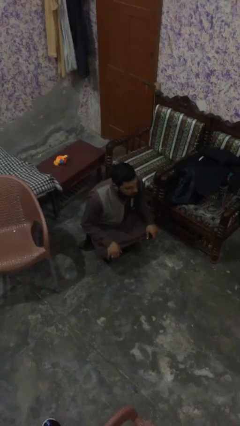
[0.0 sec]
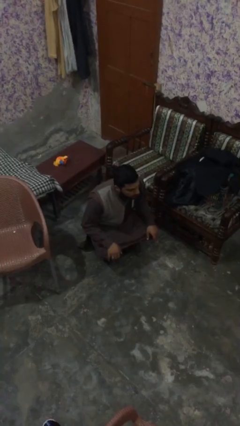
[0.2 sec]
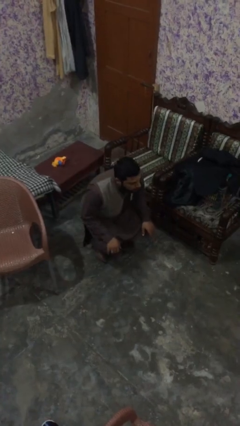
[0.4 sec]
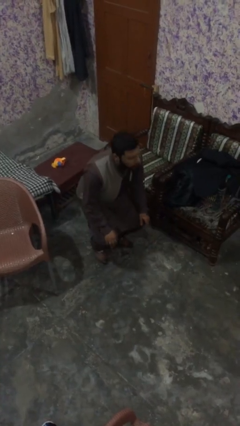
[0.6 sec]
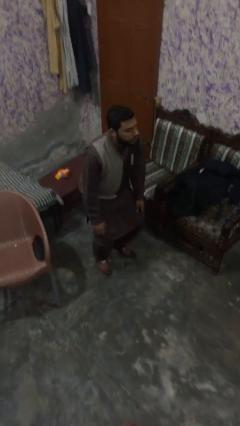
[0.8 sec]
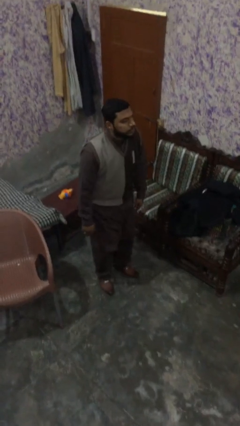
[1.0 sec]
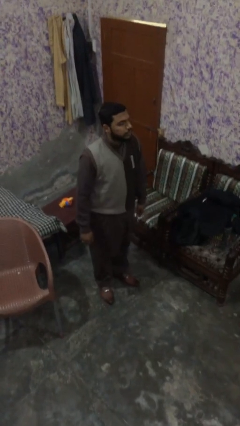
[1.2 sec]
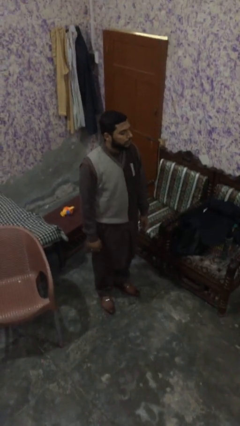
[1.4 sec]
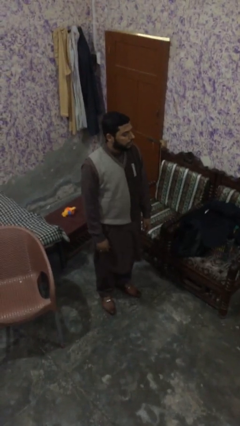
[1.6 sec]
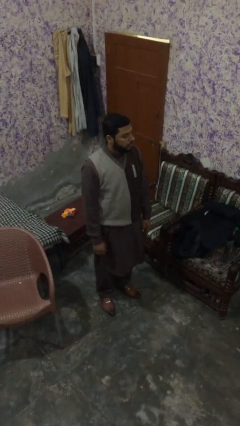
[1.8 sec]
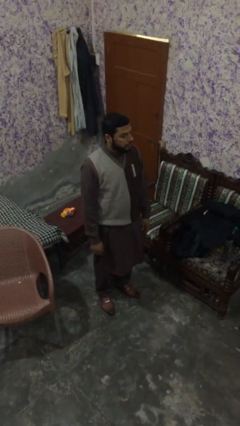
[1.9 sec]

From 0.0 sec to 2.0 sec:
person stands up

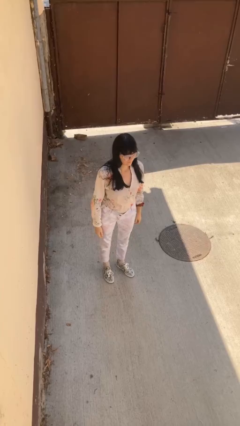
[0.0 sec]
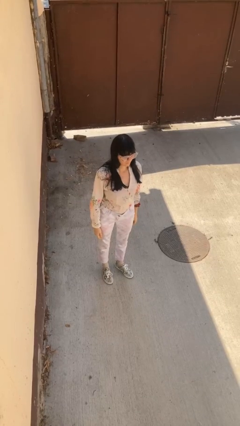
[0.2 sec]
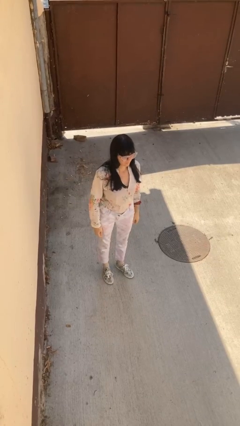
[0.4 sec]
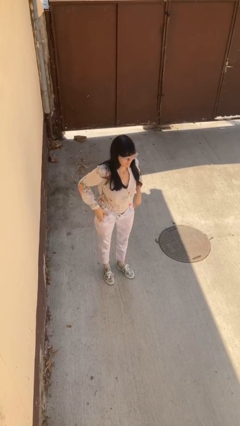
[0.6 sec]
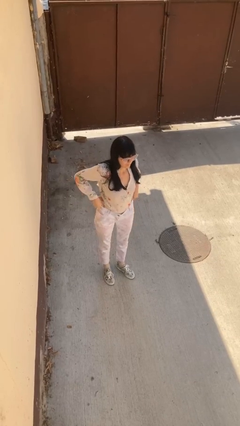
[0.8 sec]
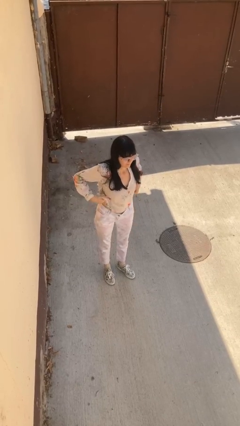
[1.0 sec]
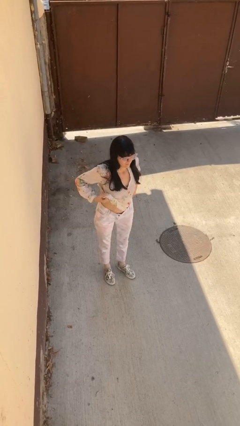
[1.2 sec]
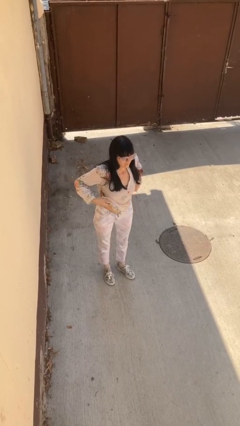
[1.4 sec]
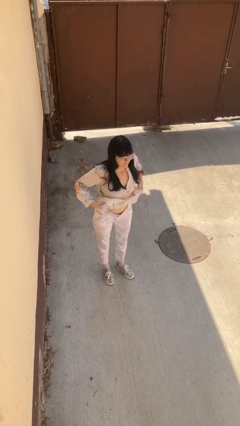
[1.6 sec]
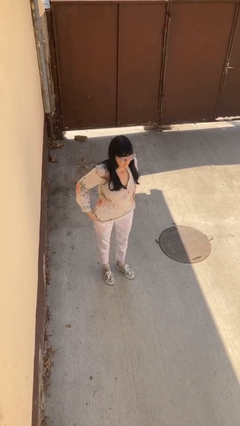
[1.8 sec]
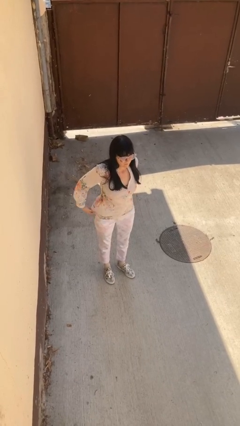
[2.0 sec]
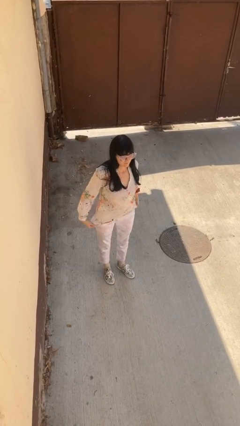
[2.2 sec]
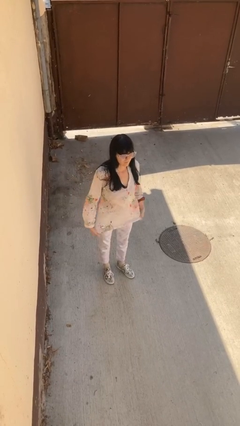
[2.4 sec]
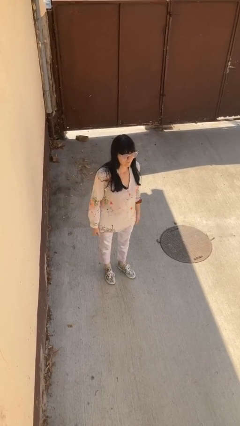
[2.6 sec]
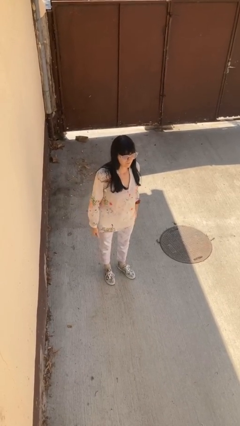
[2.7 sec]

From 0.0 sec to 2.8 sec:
person untucks shirt

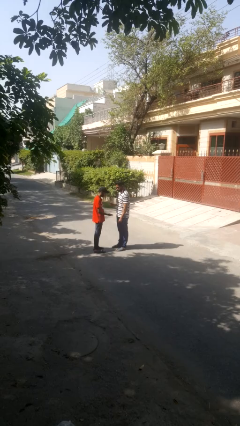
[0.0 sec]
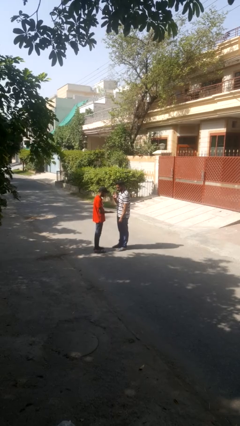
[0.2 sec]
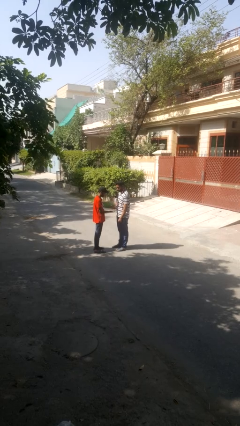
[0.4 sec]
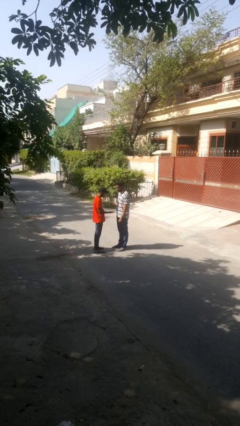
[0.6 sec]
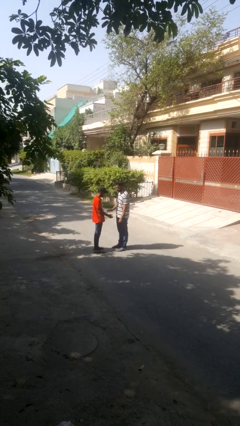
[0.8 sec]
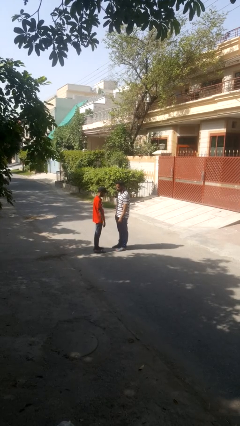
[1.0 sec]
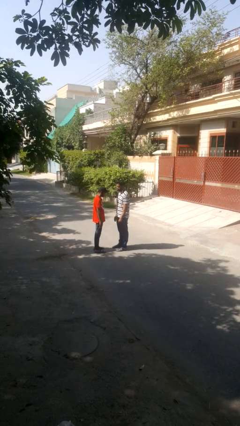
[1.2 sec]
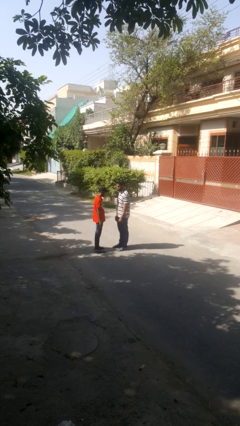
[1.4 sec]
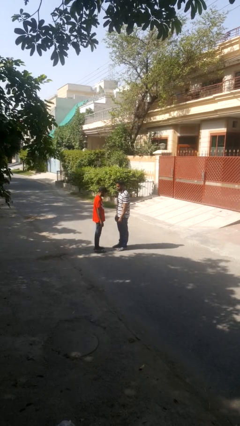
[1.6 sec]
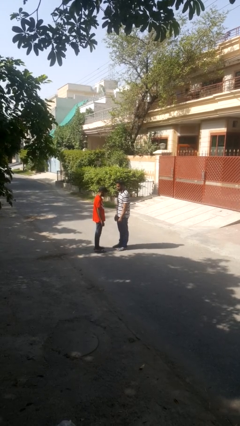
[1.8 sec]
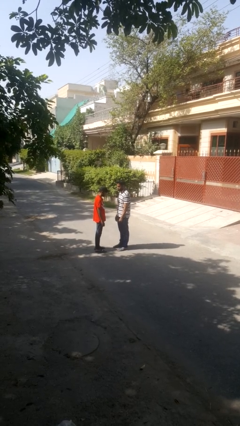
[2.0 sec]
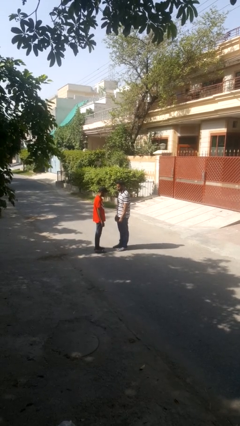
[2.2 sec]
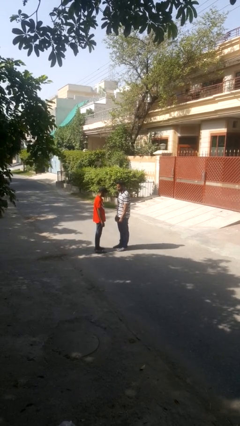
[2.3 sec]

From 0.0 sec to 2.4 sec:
person highfives hand

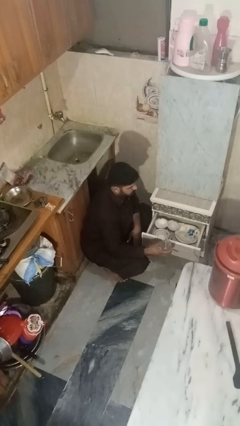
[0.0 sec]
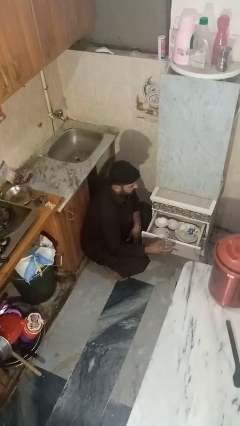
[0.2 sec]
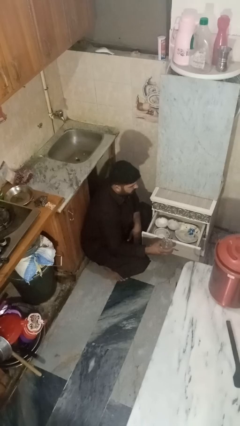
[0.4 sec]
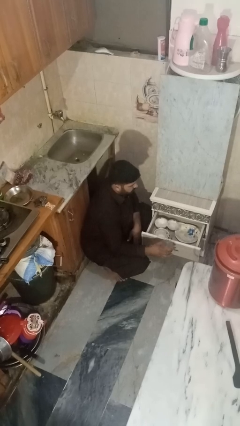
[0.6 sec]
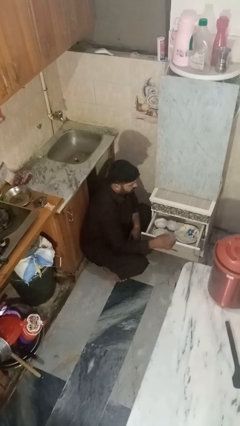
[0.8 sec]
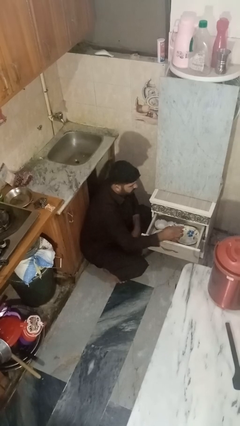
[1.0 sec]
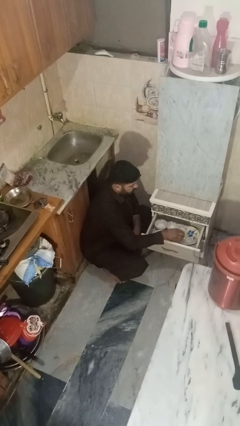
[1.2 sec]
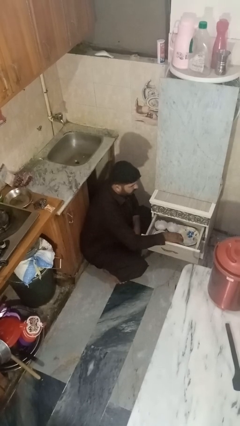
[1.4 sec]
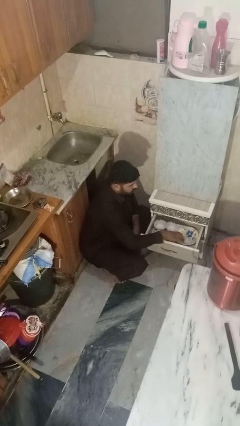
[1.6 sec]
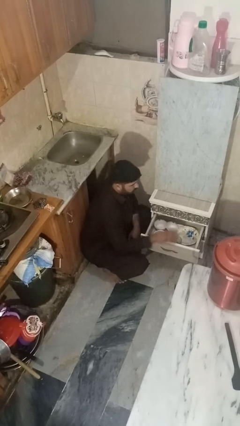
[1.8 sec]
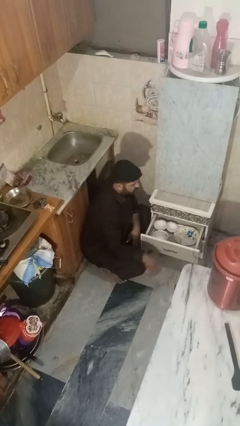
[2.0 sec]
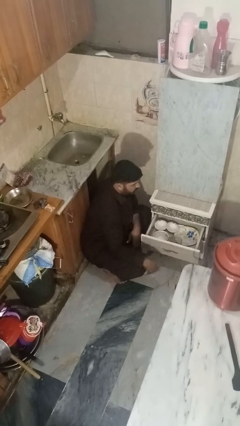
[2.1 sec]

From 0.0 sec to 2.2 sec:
person puts object into kitchen drawer

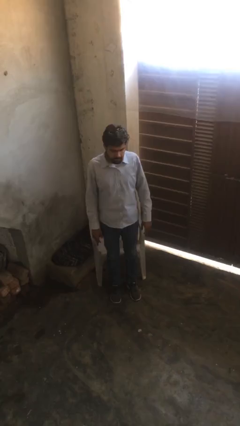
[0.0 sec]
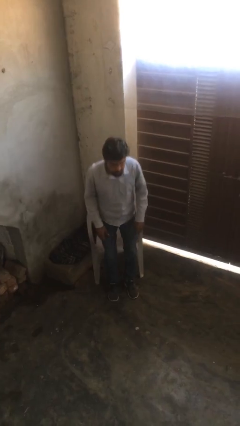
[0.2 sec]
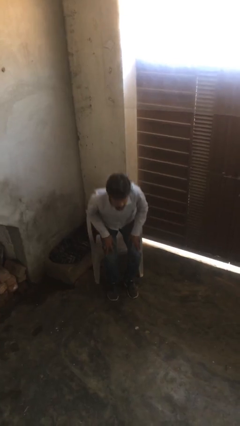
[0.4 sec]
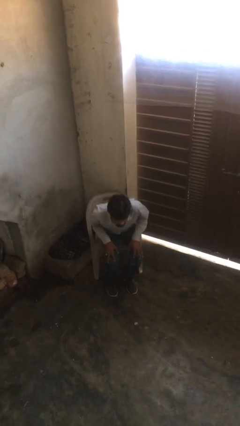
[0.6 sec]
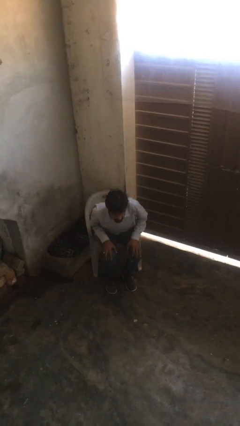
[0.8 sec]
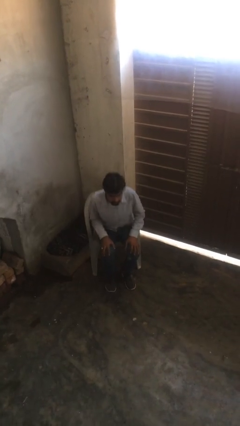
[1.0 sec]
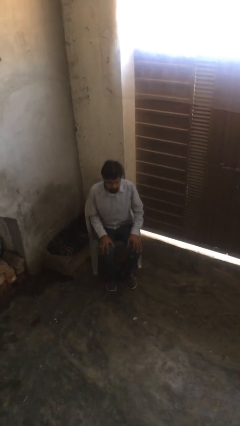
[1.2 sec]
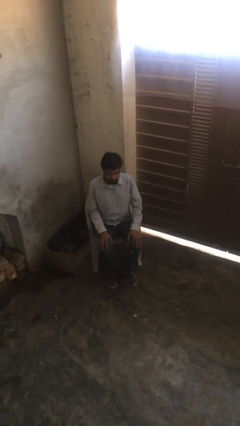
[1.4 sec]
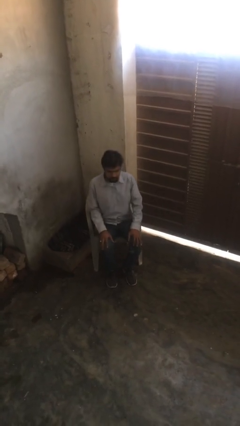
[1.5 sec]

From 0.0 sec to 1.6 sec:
person sits down

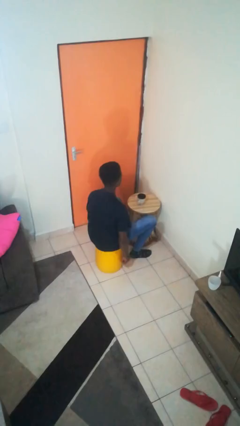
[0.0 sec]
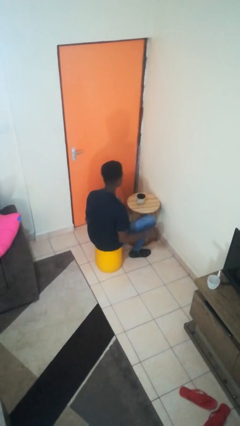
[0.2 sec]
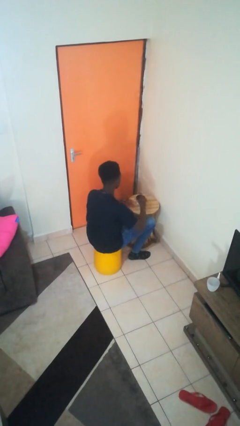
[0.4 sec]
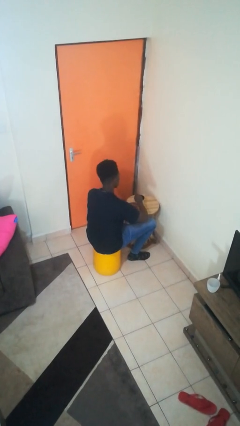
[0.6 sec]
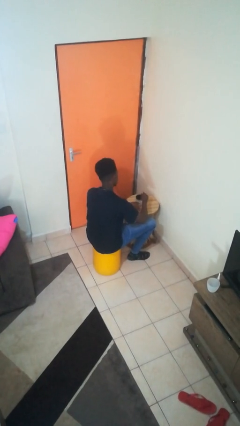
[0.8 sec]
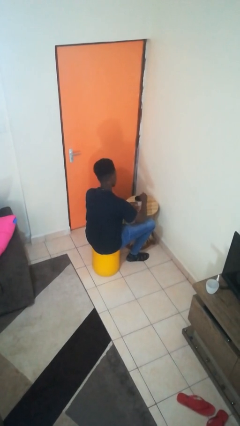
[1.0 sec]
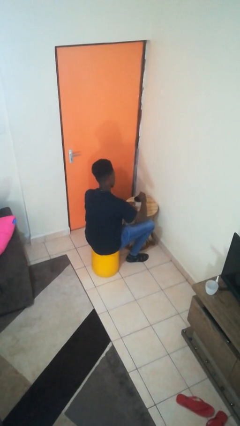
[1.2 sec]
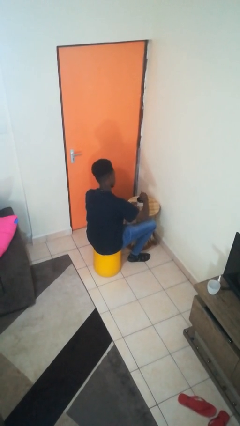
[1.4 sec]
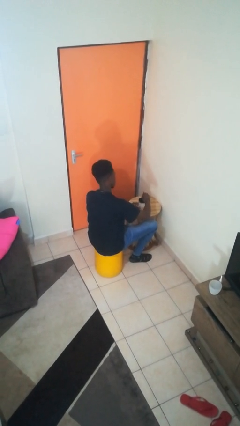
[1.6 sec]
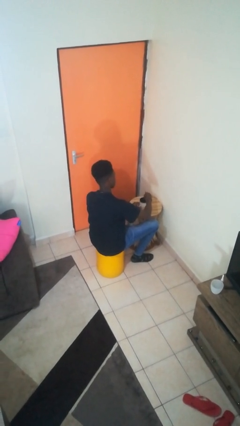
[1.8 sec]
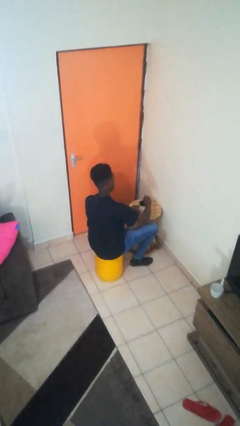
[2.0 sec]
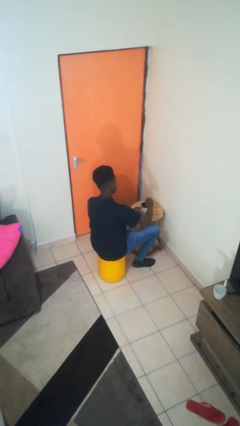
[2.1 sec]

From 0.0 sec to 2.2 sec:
person stirs mug

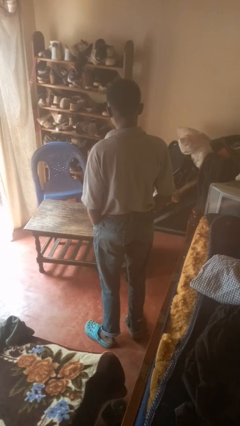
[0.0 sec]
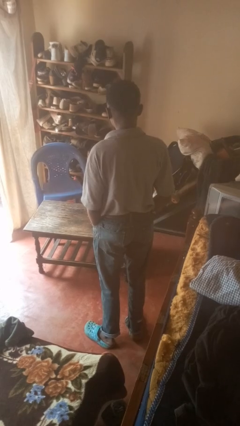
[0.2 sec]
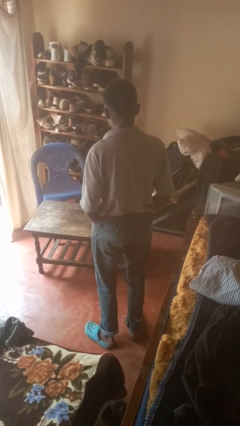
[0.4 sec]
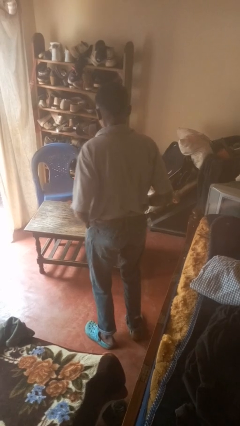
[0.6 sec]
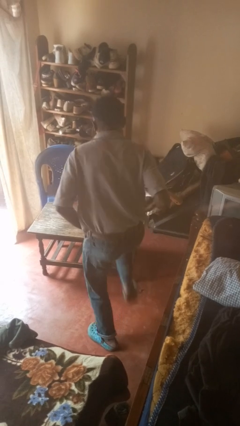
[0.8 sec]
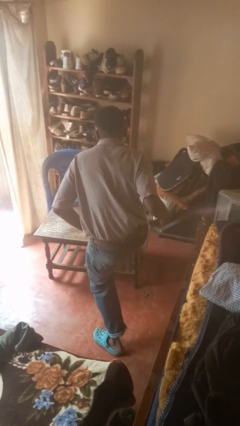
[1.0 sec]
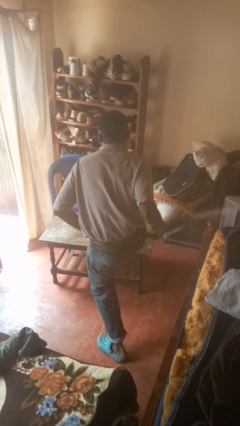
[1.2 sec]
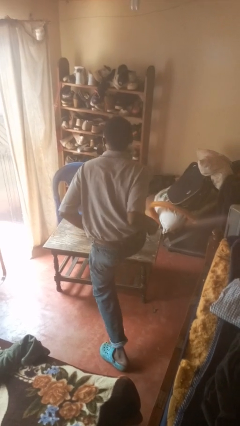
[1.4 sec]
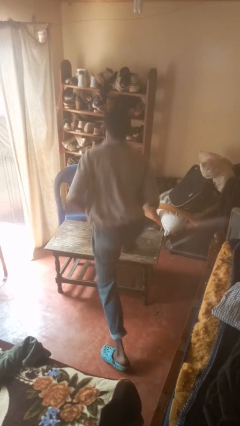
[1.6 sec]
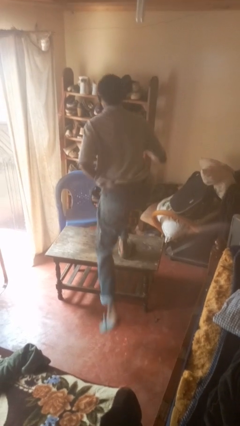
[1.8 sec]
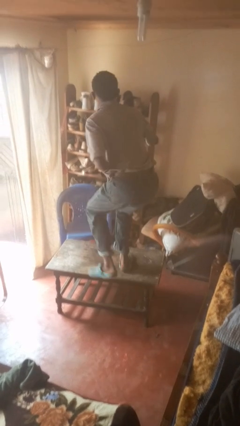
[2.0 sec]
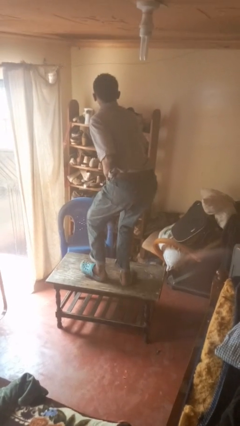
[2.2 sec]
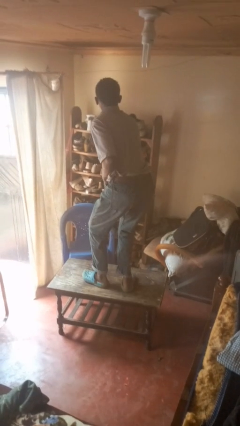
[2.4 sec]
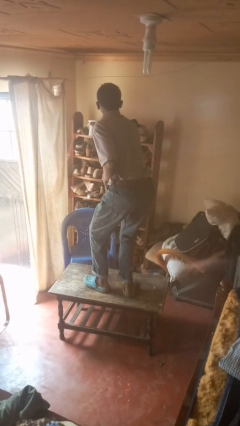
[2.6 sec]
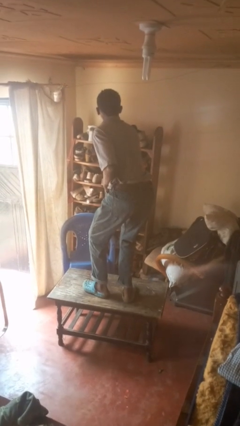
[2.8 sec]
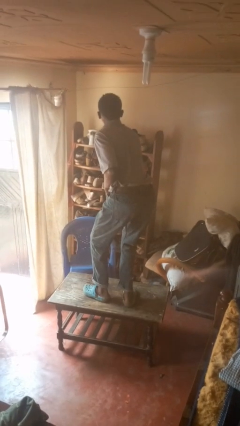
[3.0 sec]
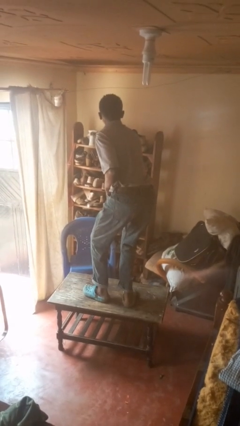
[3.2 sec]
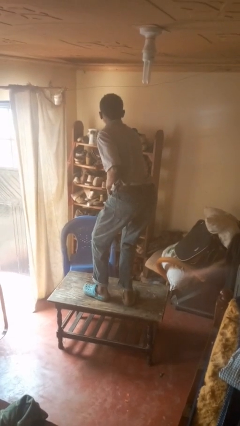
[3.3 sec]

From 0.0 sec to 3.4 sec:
person climbs on table

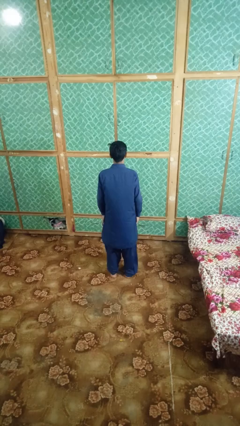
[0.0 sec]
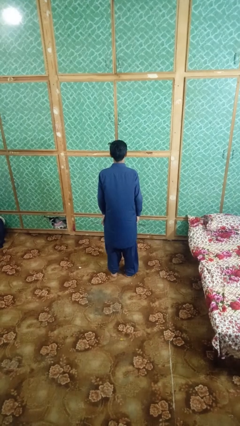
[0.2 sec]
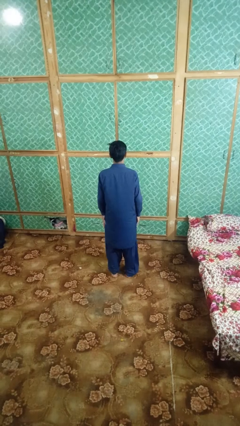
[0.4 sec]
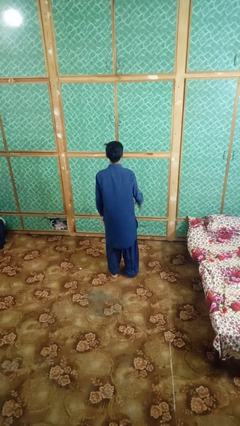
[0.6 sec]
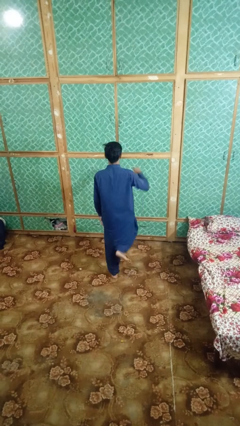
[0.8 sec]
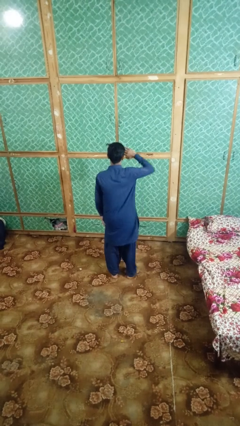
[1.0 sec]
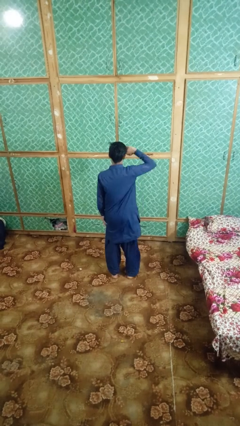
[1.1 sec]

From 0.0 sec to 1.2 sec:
person salutes
